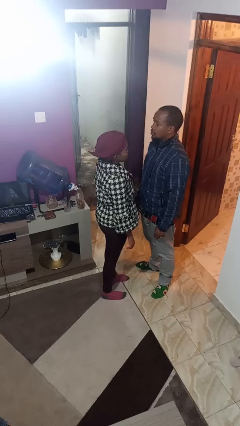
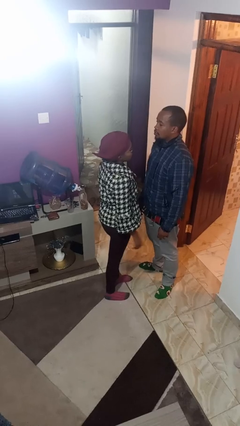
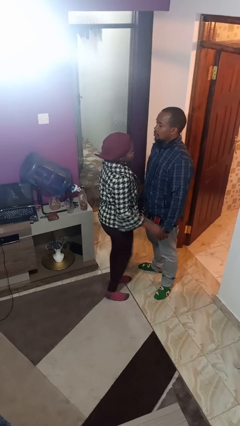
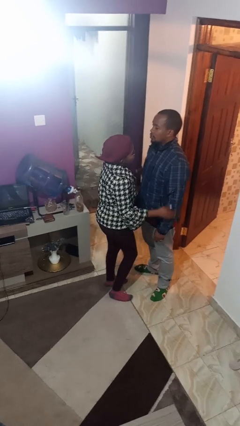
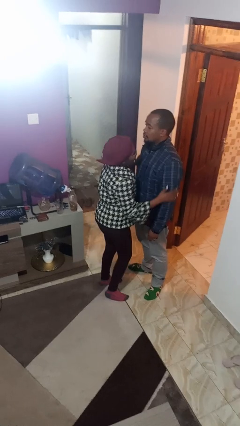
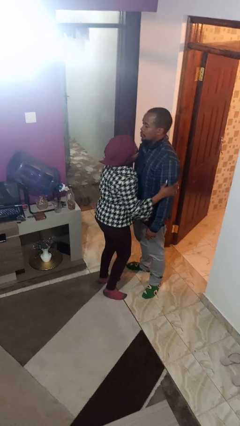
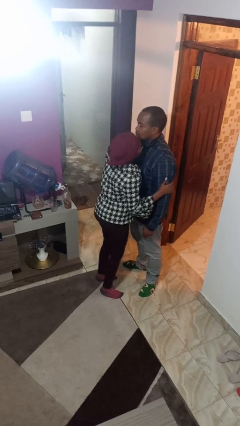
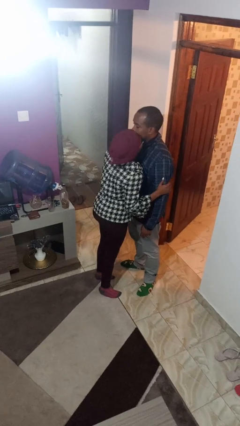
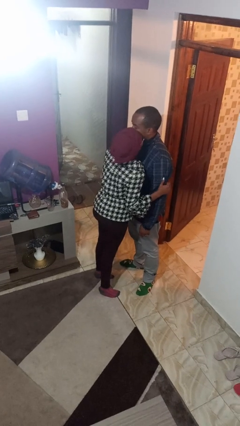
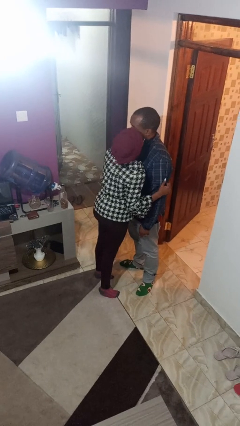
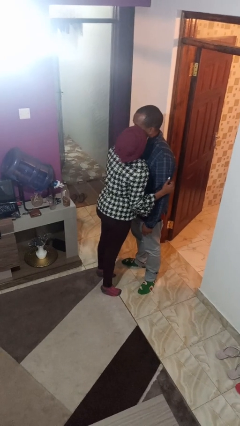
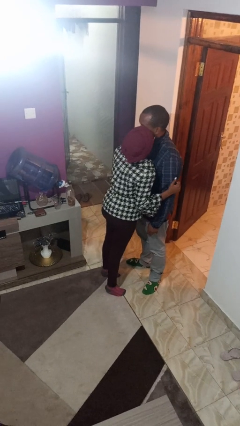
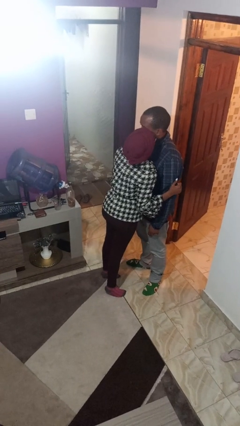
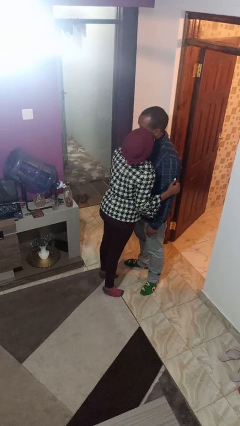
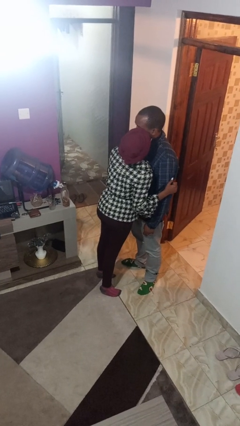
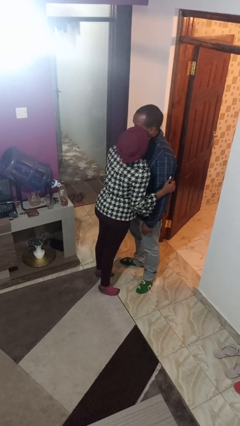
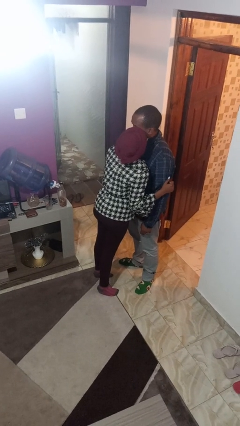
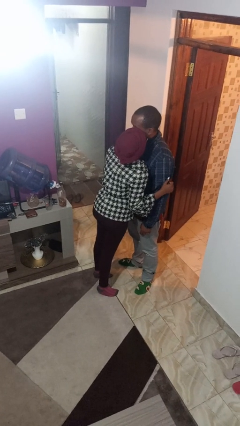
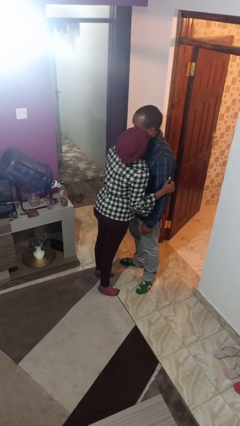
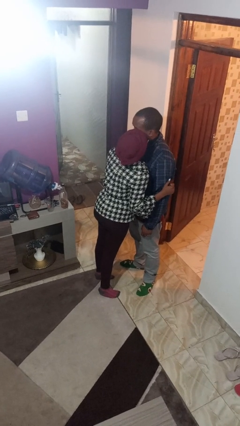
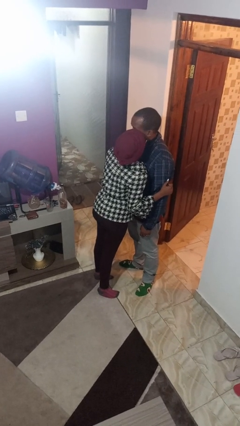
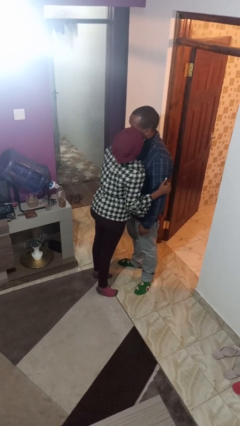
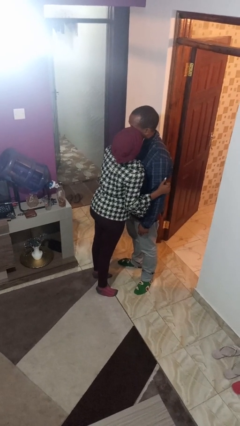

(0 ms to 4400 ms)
person kisses cheek of person

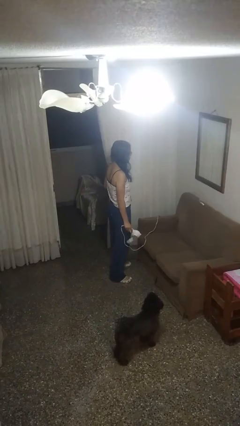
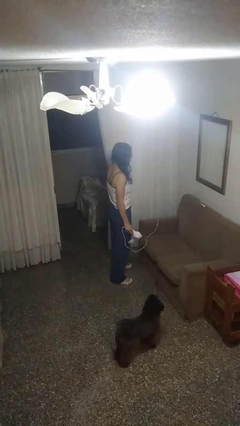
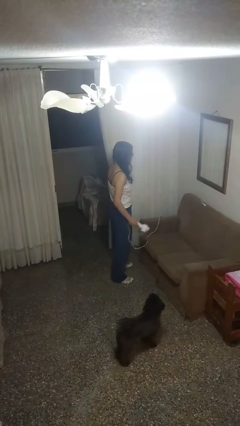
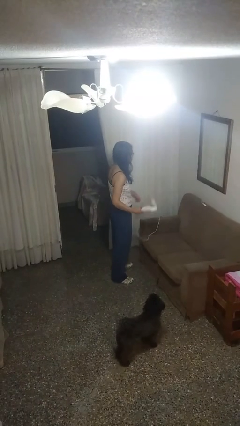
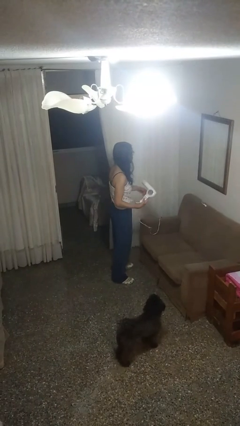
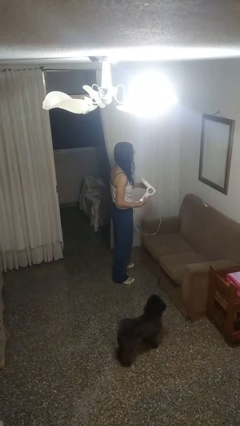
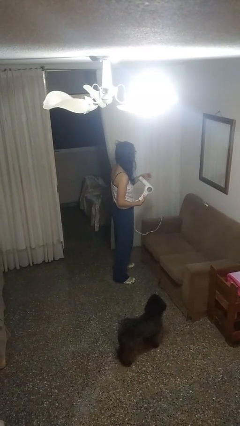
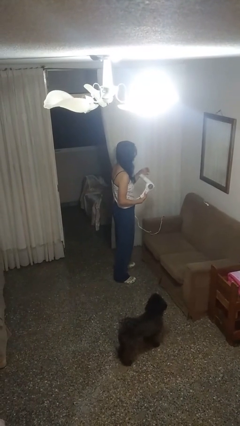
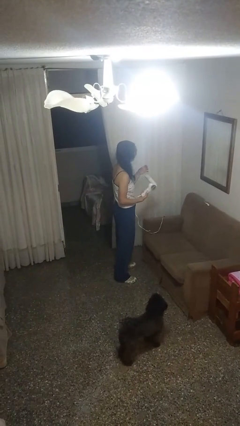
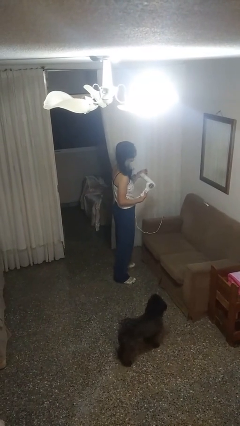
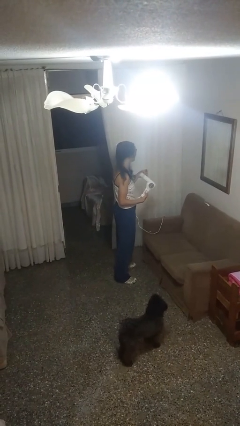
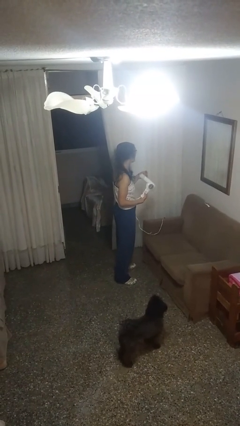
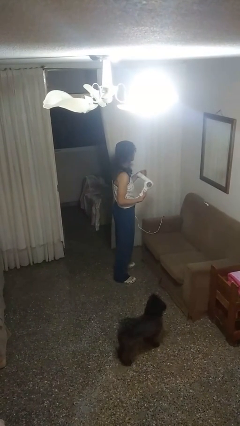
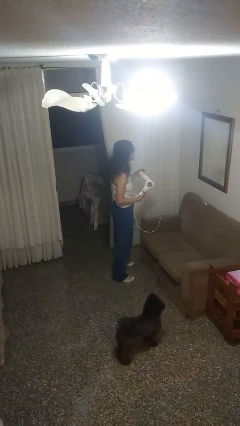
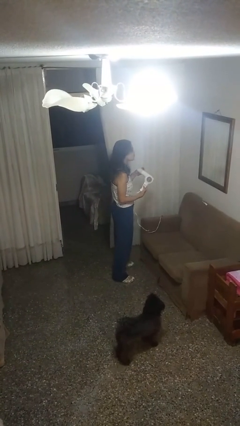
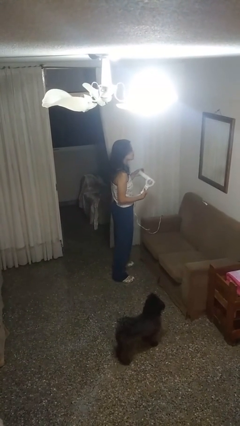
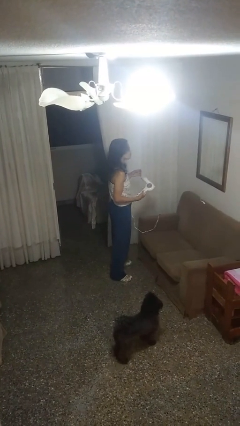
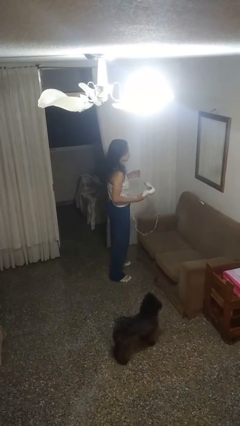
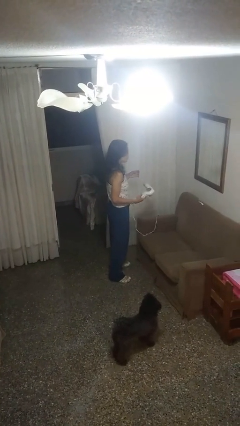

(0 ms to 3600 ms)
person dries hair with hairdryer

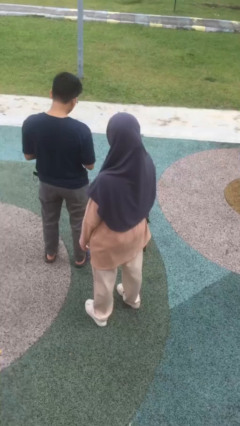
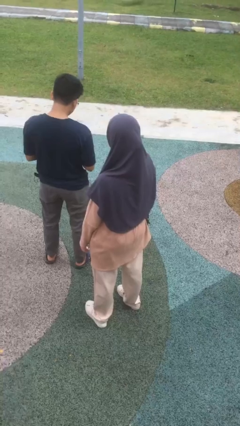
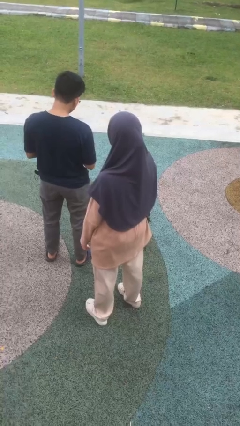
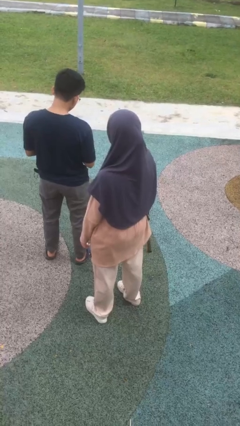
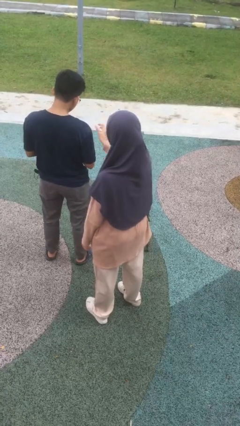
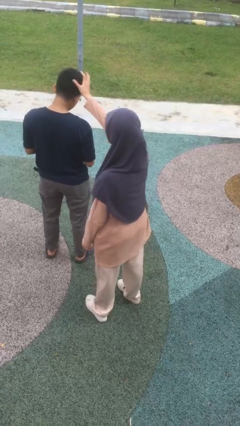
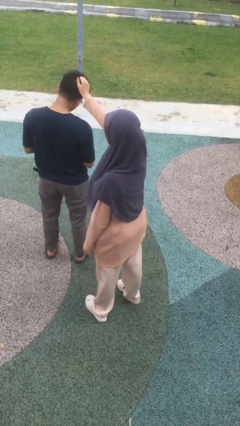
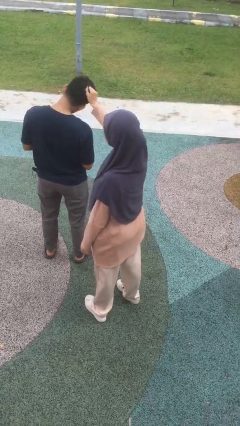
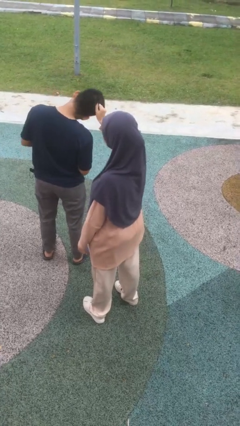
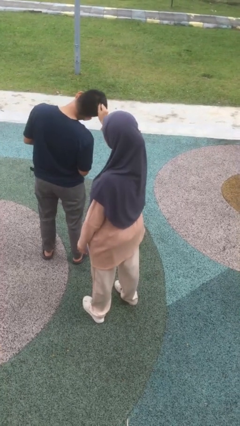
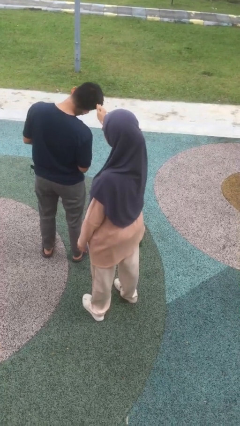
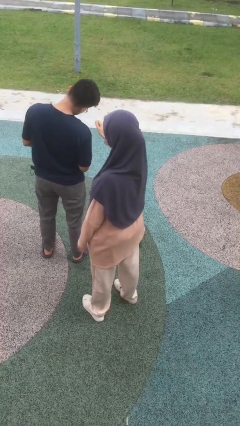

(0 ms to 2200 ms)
person grabs person by hair

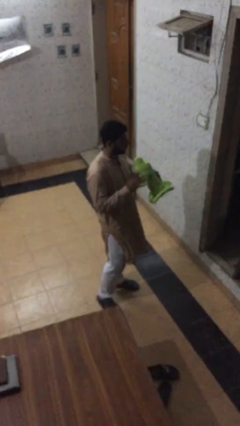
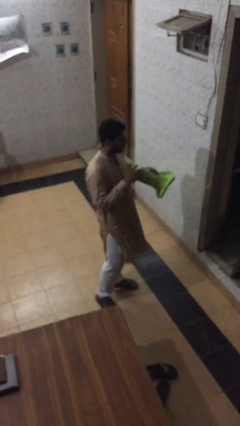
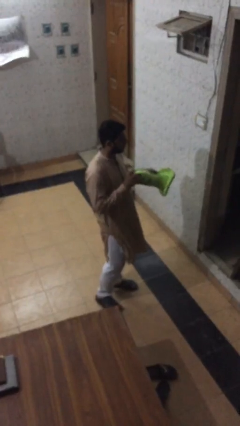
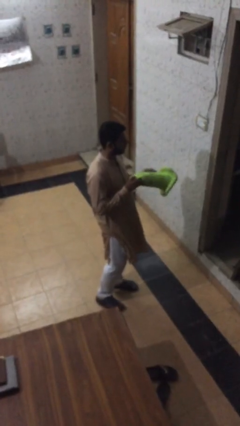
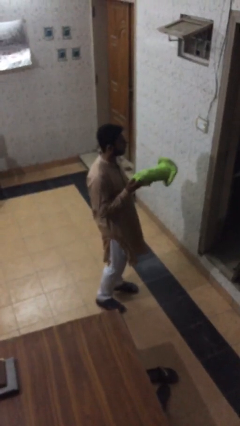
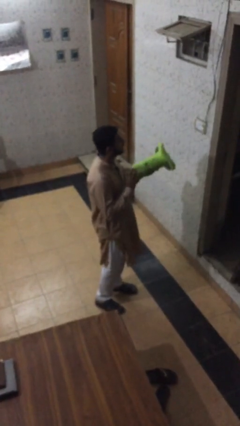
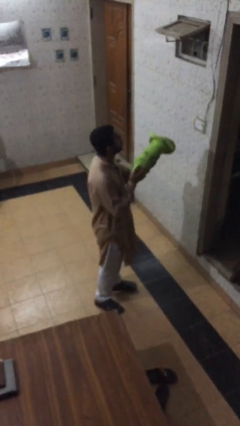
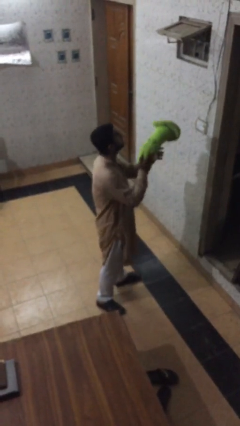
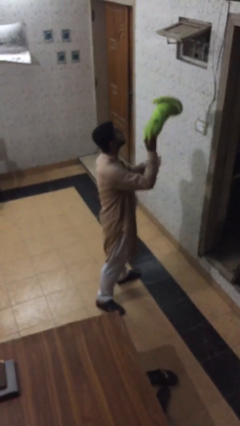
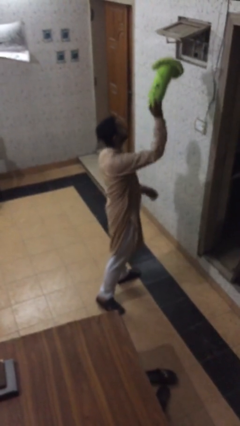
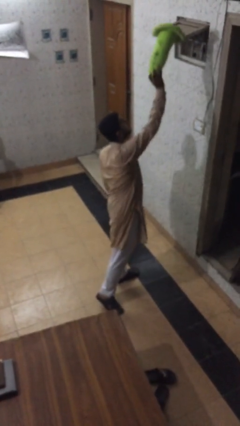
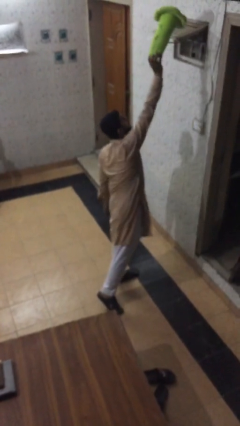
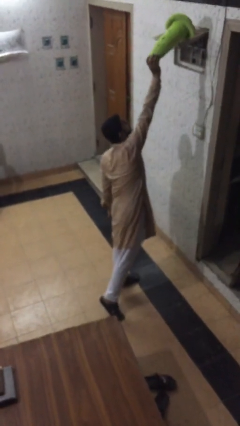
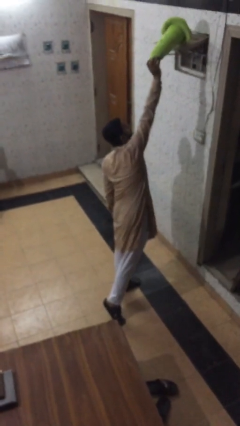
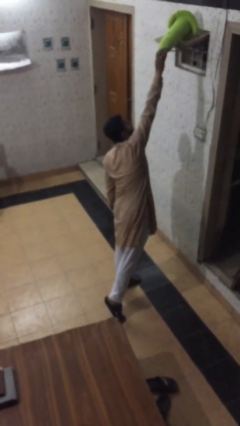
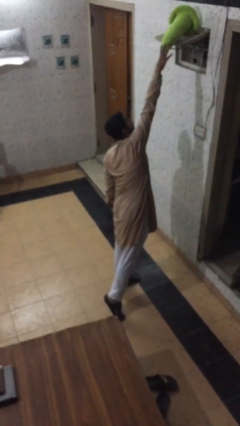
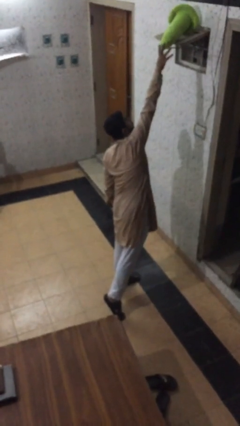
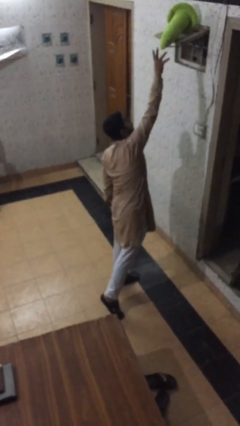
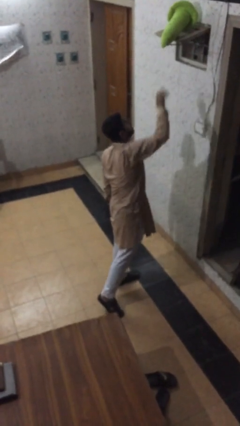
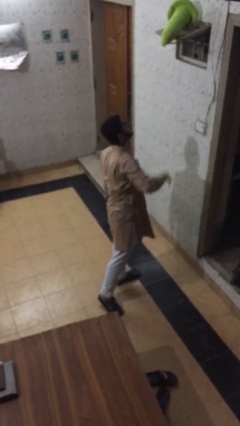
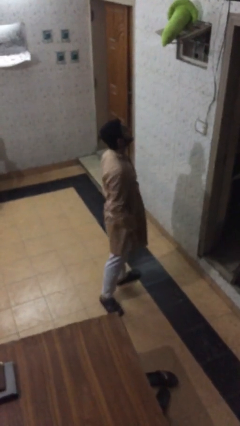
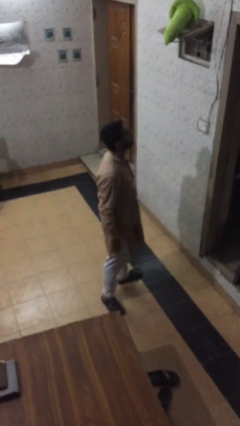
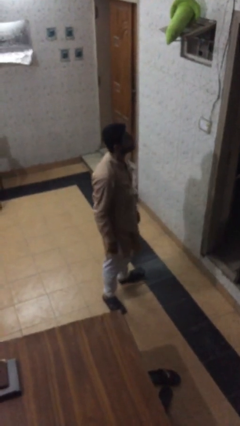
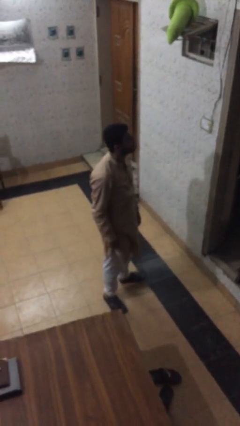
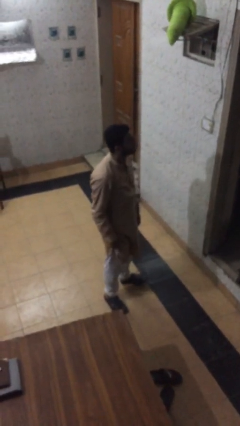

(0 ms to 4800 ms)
person puts down object on shelf

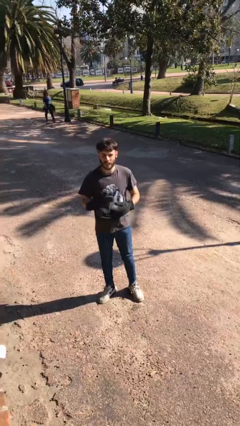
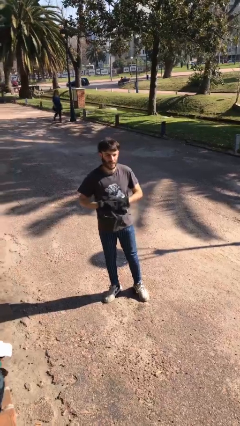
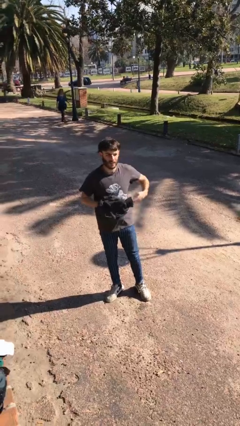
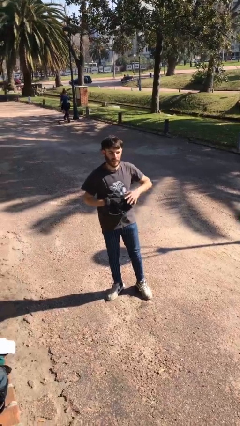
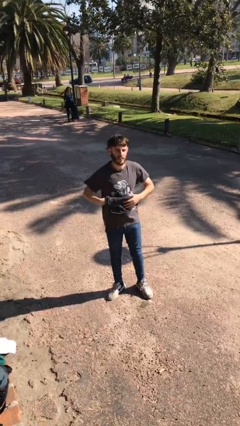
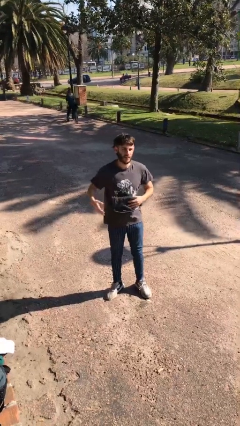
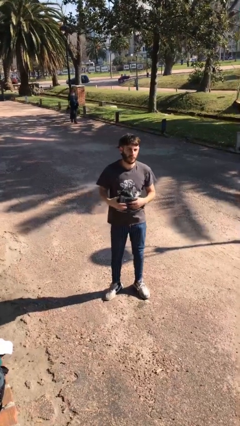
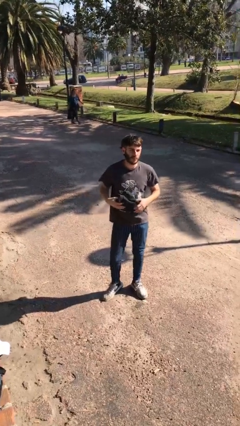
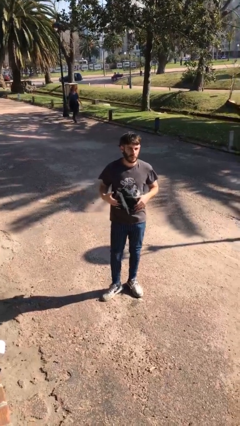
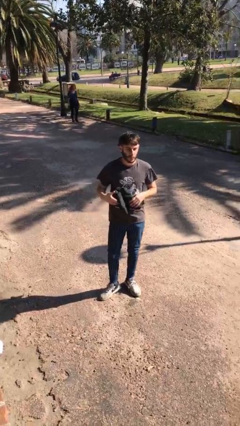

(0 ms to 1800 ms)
person takes off gloves

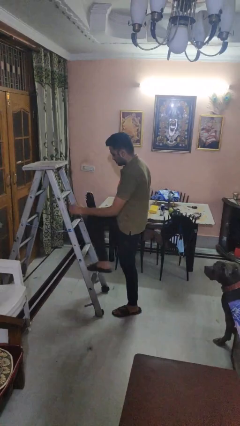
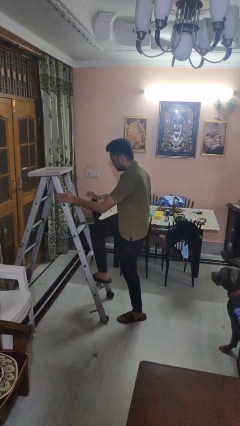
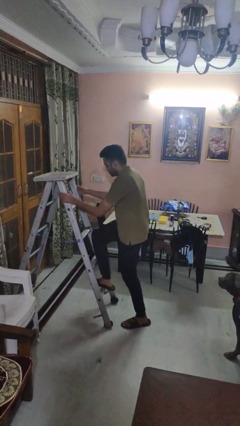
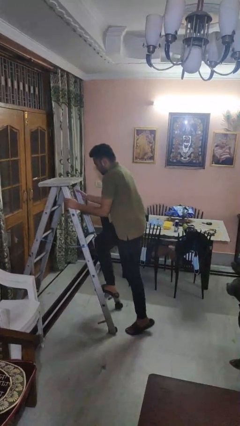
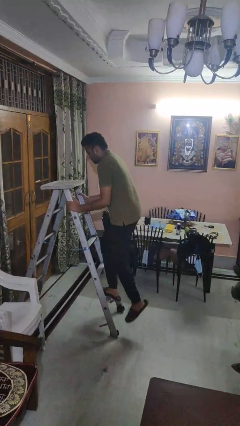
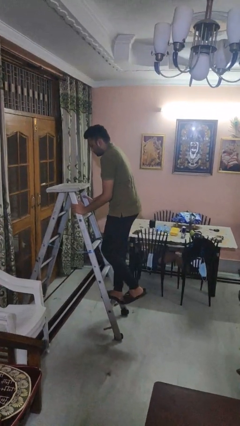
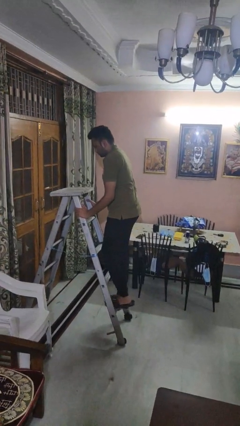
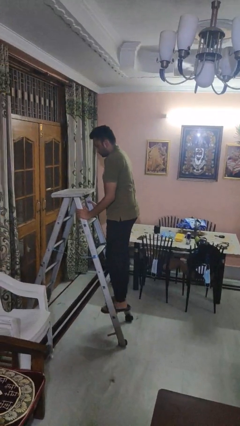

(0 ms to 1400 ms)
person climbs up ladder
